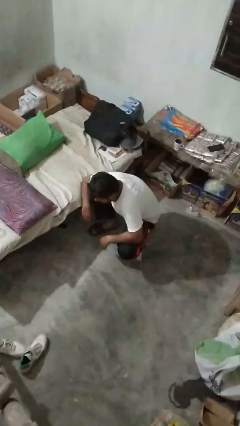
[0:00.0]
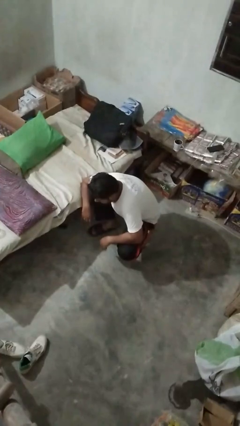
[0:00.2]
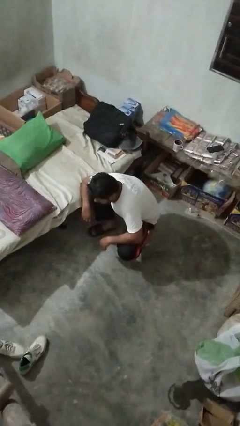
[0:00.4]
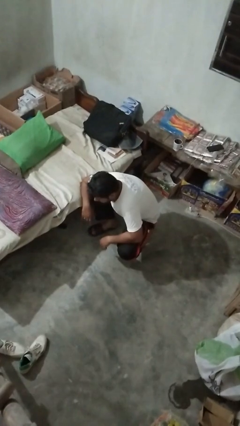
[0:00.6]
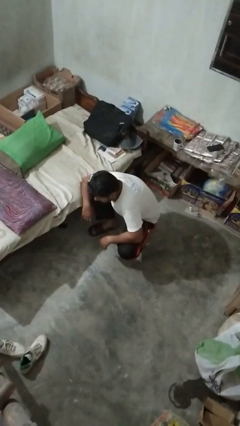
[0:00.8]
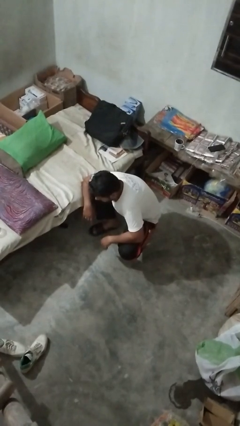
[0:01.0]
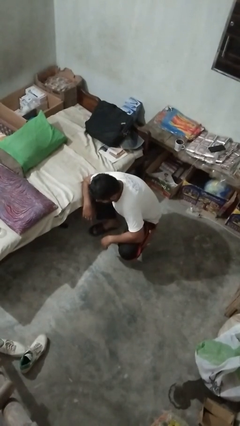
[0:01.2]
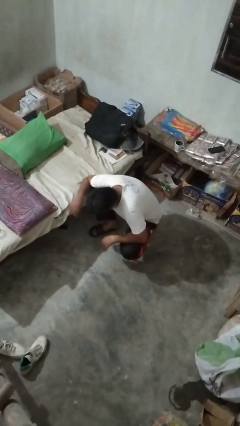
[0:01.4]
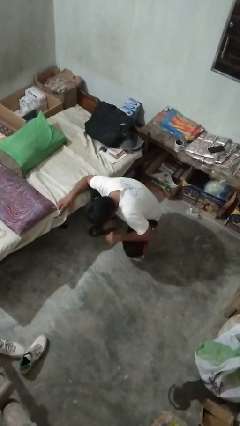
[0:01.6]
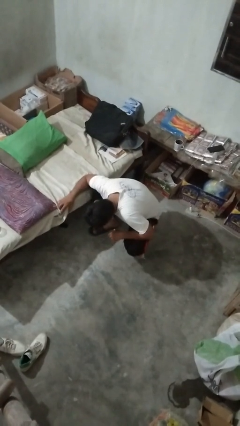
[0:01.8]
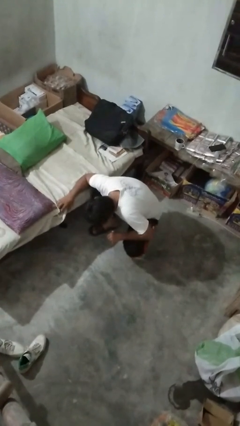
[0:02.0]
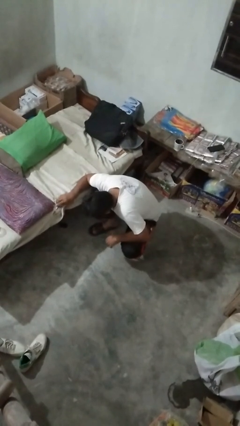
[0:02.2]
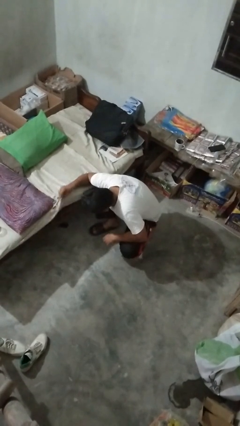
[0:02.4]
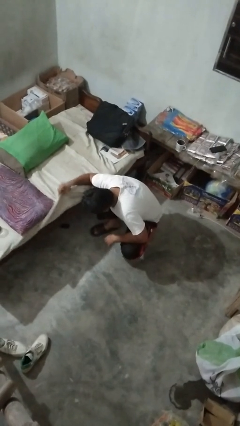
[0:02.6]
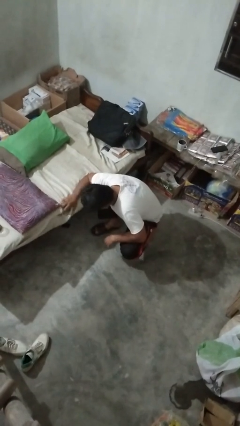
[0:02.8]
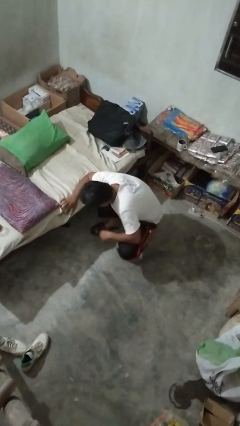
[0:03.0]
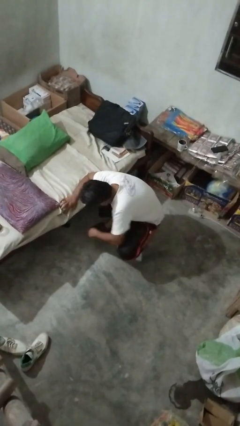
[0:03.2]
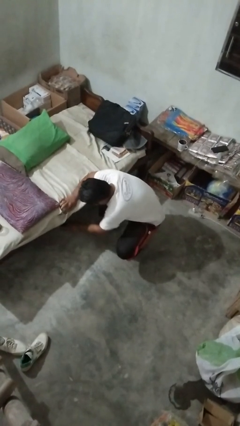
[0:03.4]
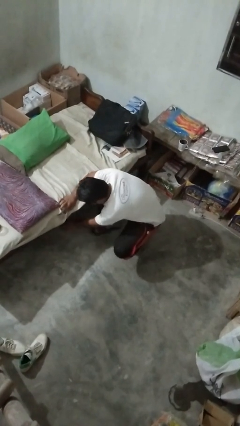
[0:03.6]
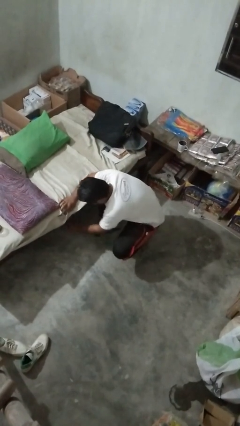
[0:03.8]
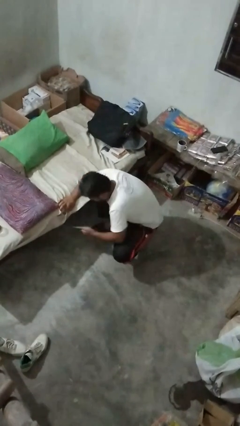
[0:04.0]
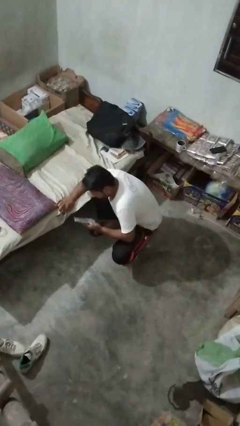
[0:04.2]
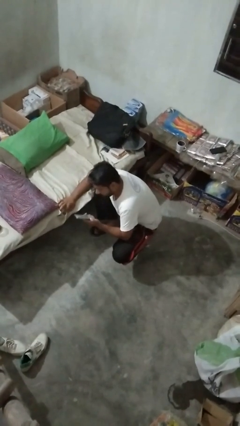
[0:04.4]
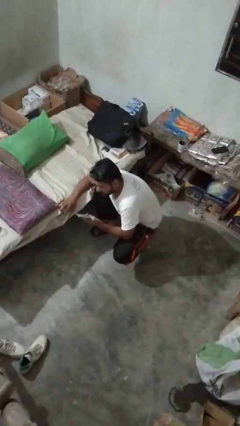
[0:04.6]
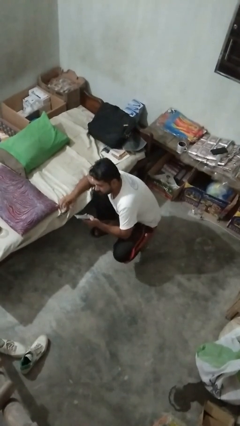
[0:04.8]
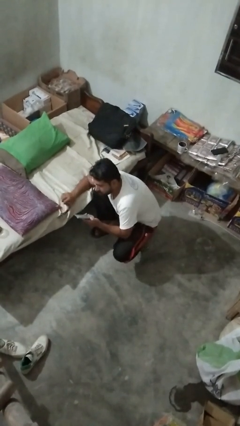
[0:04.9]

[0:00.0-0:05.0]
person searches under couch

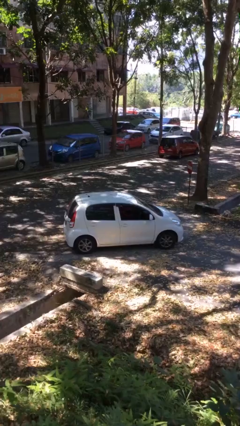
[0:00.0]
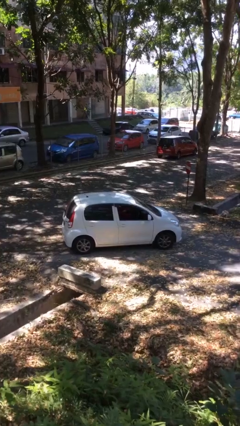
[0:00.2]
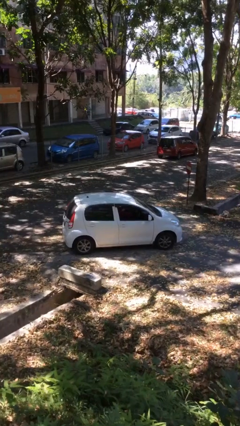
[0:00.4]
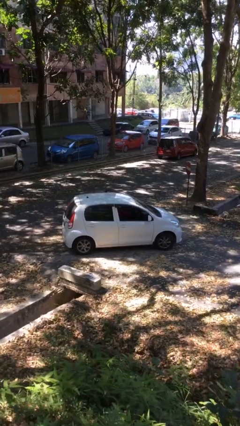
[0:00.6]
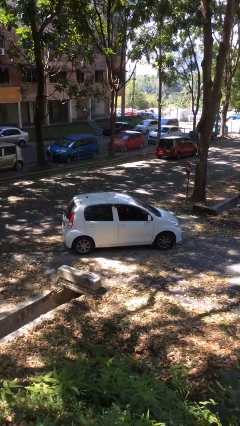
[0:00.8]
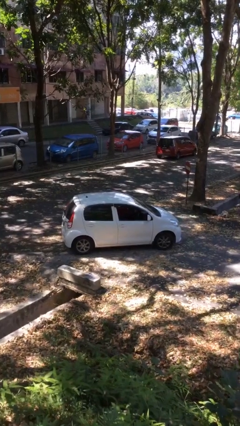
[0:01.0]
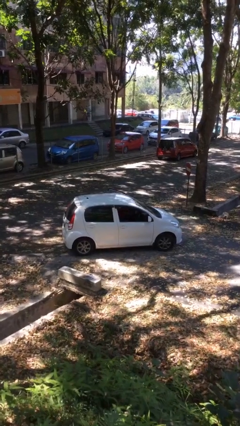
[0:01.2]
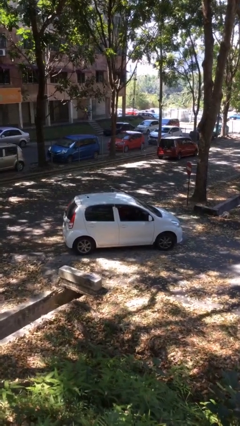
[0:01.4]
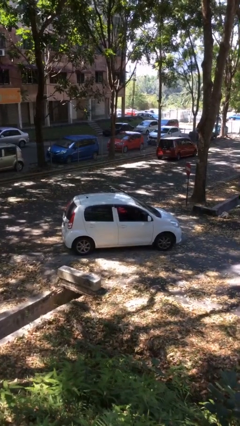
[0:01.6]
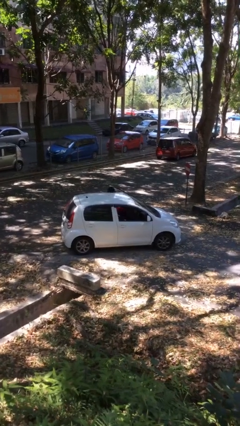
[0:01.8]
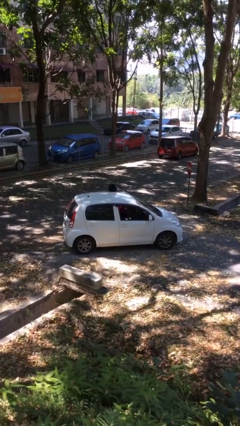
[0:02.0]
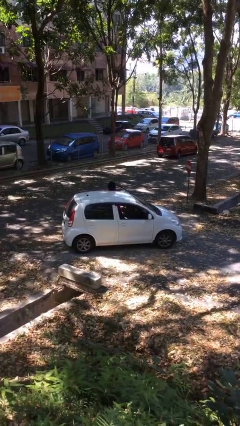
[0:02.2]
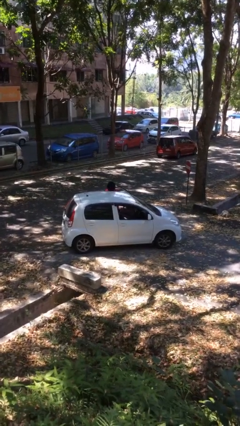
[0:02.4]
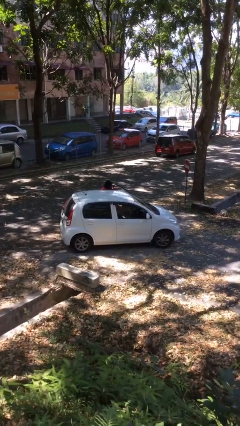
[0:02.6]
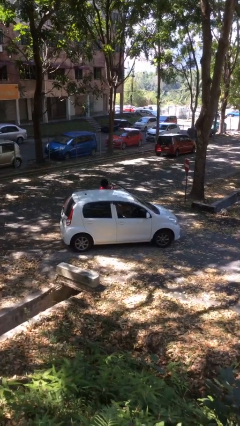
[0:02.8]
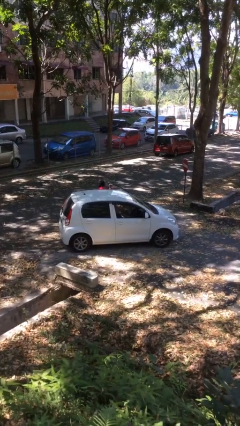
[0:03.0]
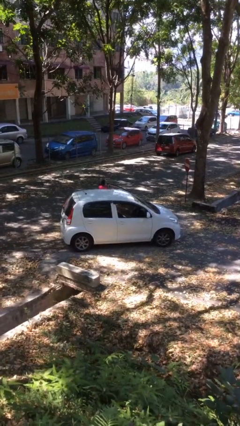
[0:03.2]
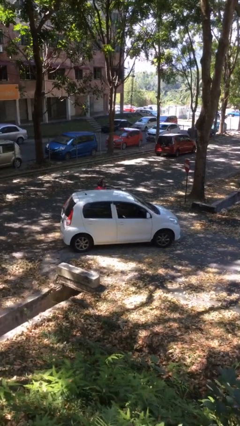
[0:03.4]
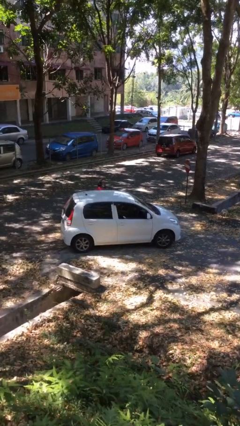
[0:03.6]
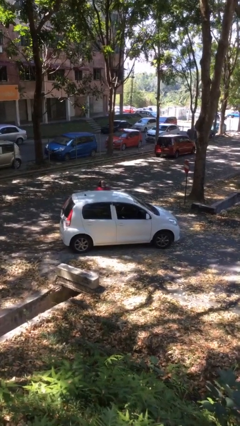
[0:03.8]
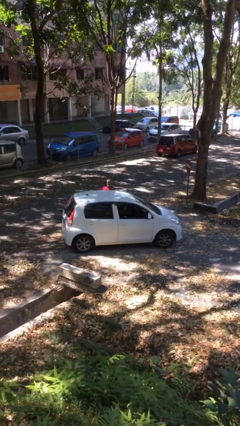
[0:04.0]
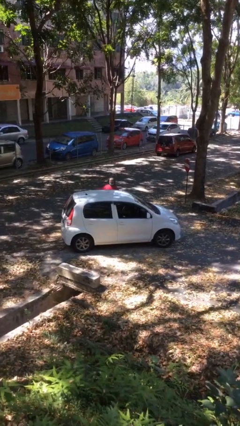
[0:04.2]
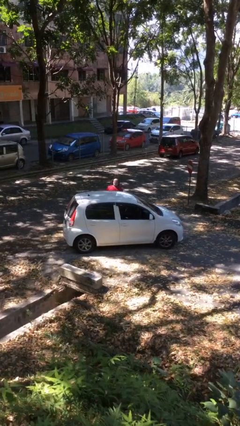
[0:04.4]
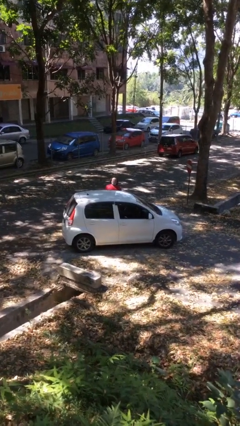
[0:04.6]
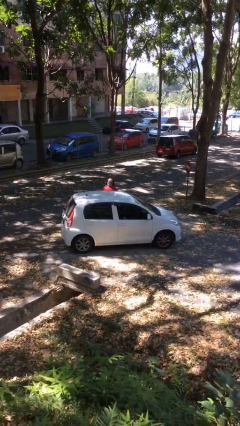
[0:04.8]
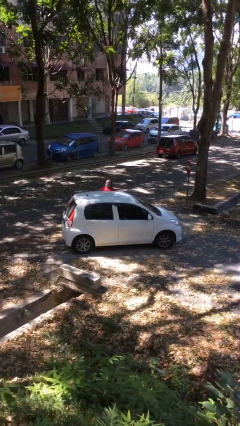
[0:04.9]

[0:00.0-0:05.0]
car drops off person

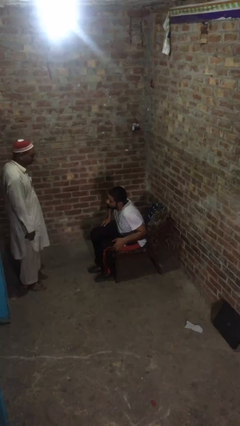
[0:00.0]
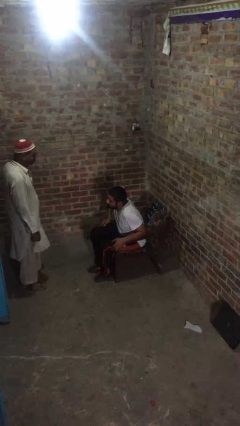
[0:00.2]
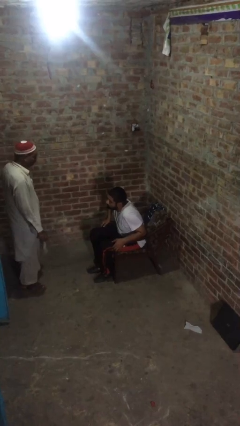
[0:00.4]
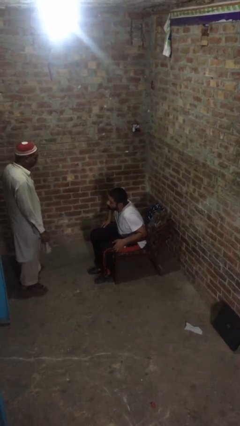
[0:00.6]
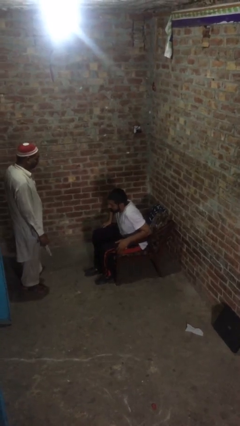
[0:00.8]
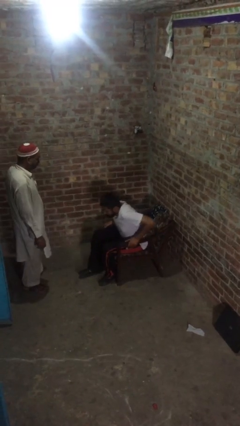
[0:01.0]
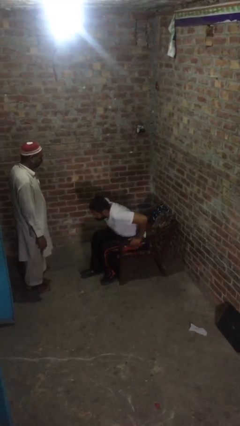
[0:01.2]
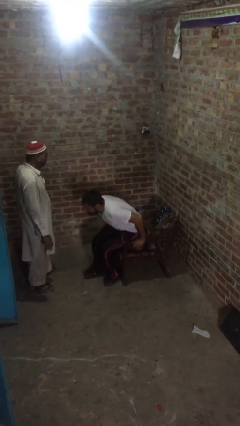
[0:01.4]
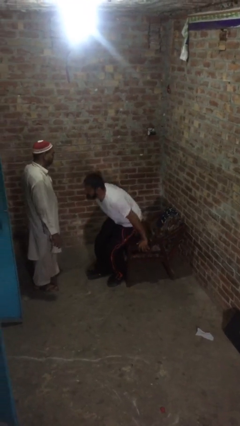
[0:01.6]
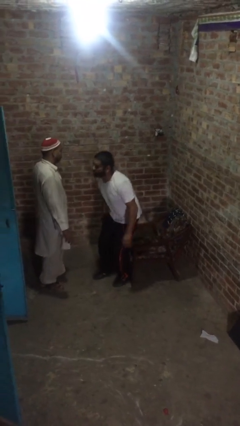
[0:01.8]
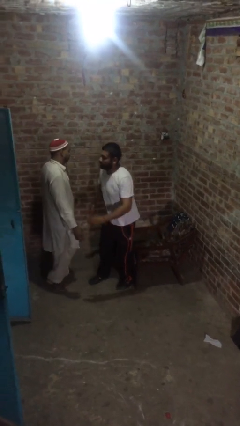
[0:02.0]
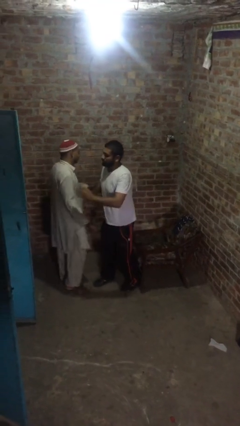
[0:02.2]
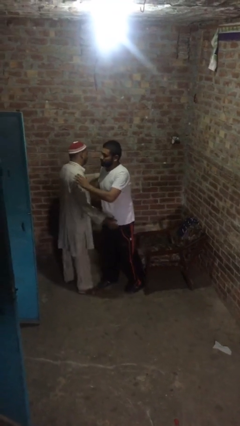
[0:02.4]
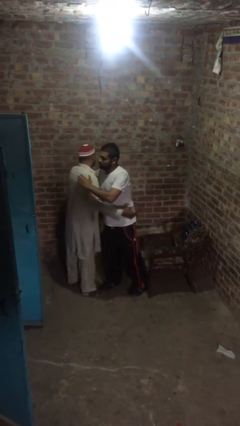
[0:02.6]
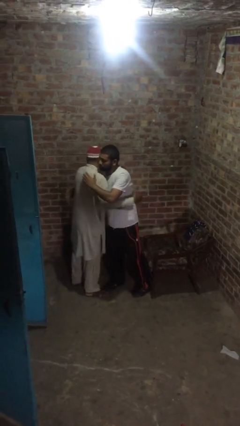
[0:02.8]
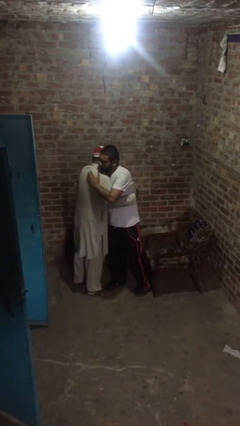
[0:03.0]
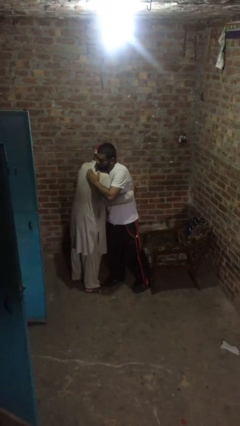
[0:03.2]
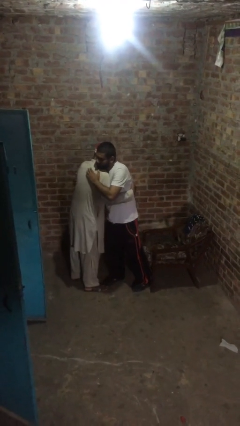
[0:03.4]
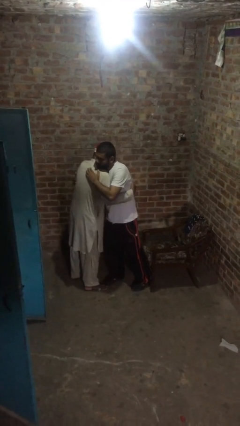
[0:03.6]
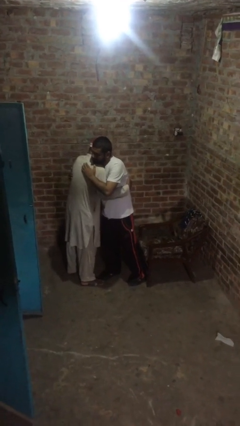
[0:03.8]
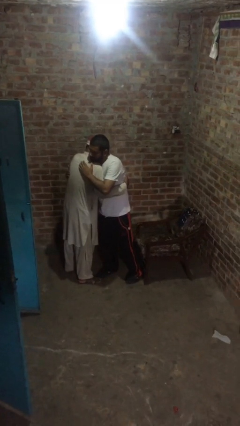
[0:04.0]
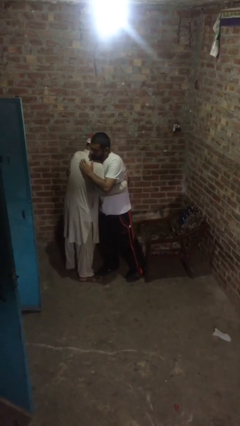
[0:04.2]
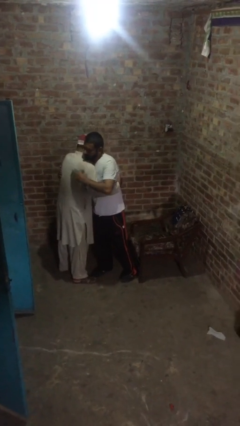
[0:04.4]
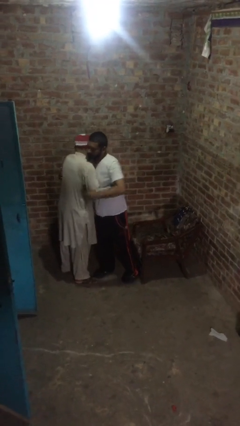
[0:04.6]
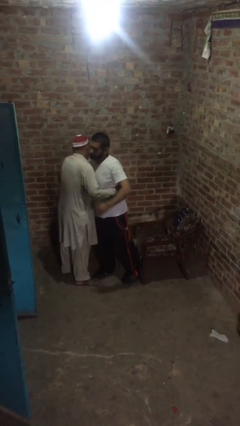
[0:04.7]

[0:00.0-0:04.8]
person embraces person

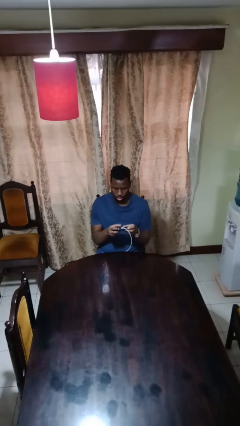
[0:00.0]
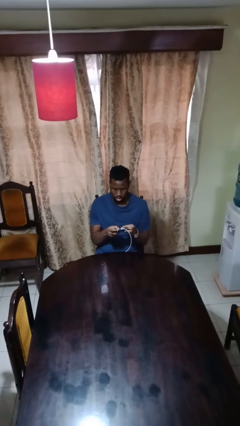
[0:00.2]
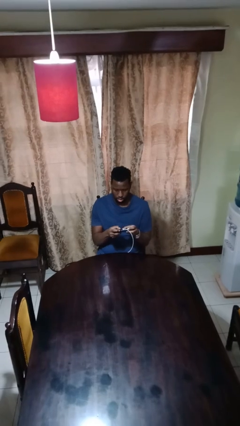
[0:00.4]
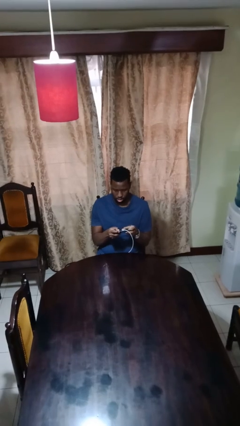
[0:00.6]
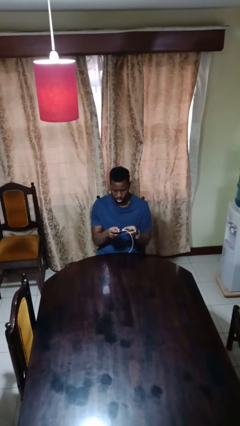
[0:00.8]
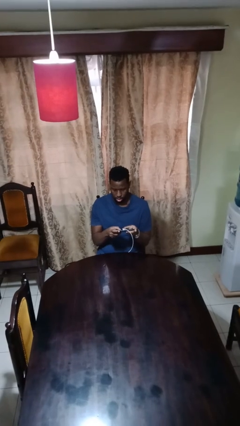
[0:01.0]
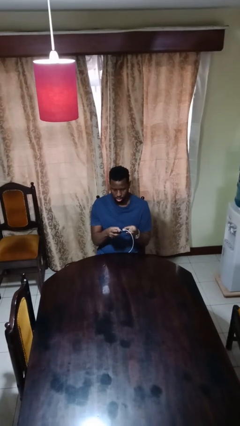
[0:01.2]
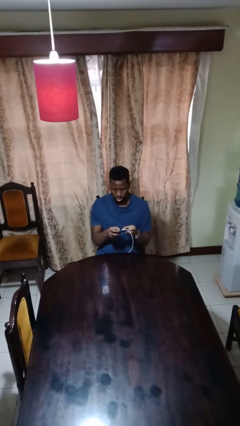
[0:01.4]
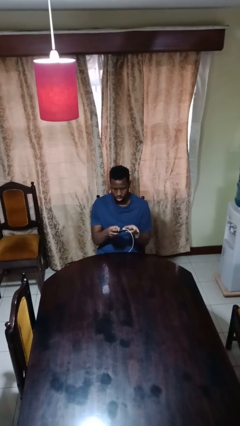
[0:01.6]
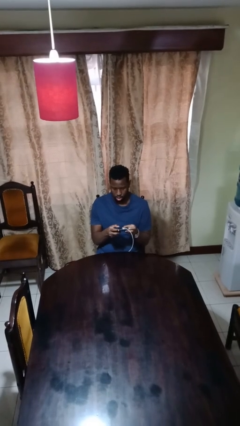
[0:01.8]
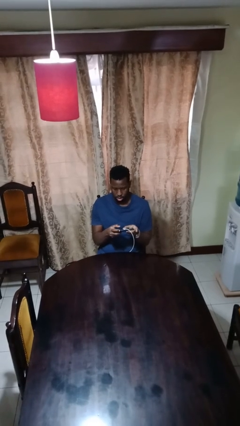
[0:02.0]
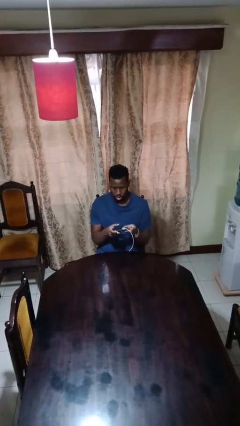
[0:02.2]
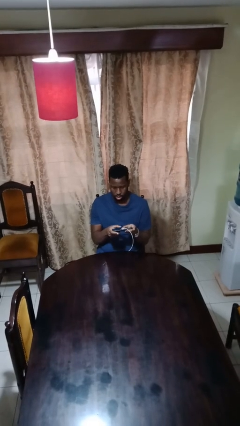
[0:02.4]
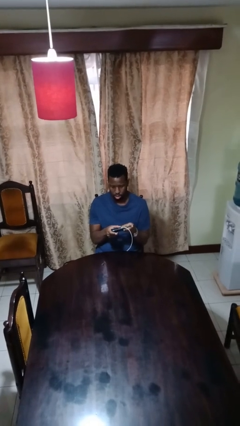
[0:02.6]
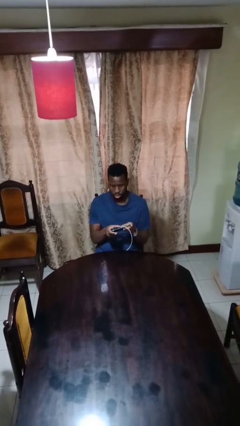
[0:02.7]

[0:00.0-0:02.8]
person interacts with handheld game
